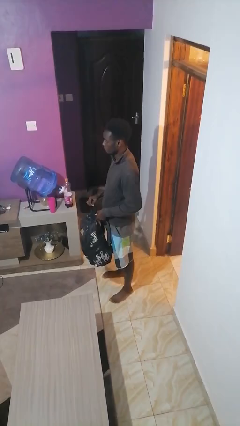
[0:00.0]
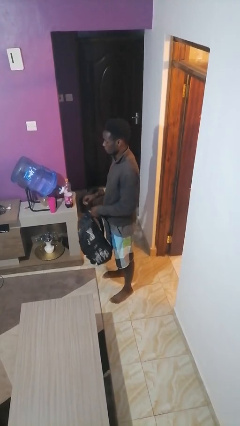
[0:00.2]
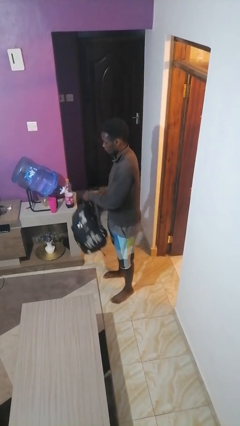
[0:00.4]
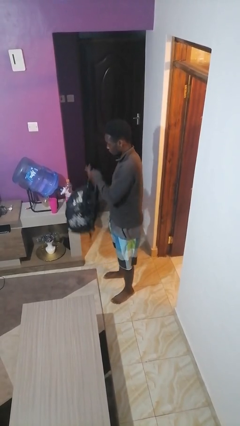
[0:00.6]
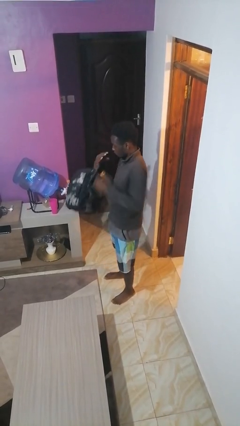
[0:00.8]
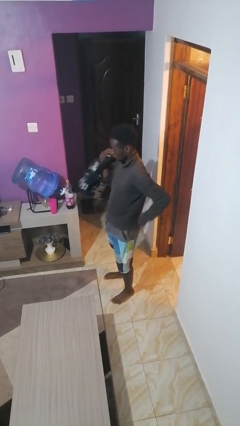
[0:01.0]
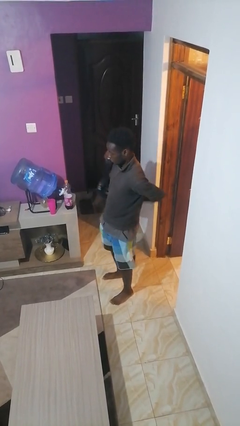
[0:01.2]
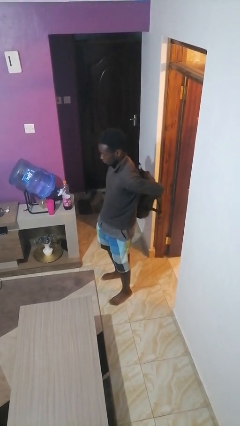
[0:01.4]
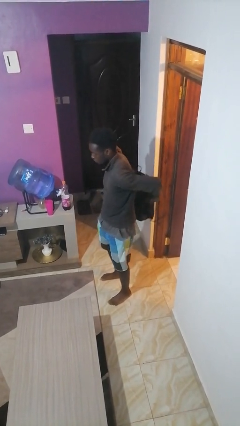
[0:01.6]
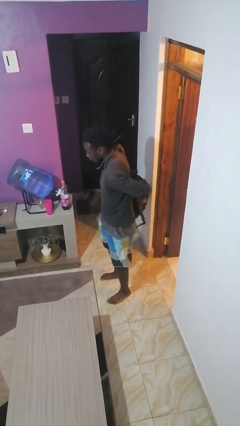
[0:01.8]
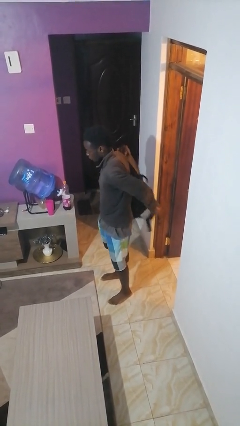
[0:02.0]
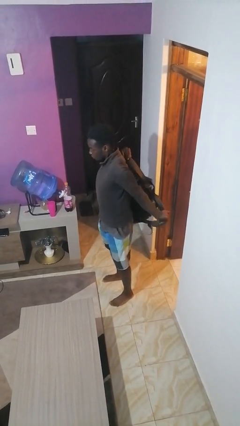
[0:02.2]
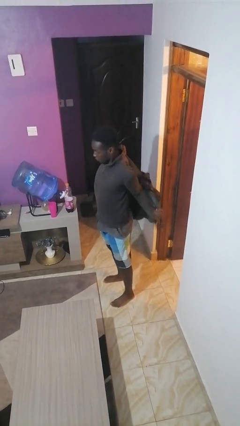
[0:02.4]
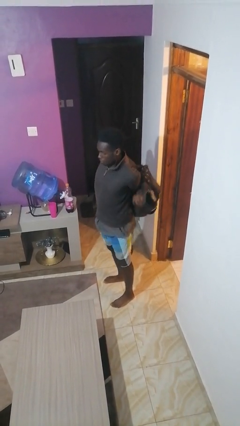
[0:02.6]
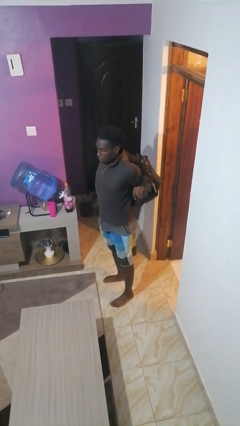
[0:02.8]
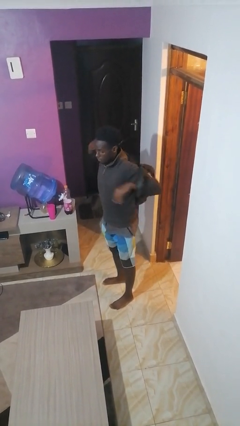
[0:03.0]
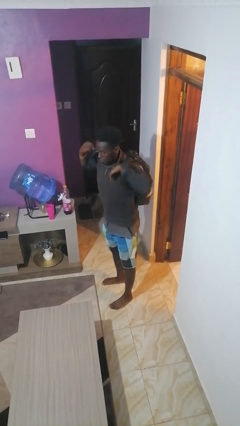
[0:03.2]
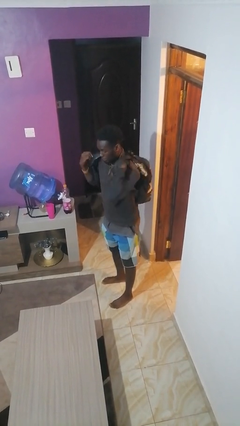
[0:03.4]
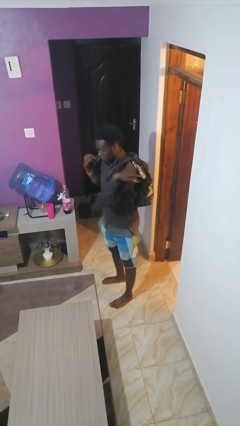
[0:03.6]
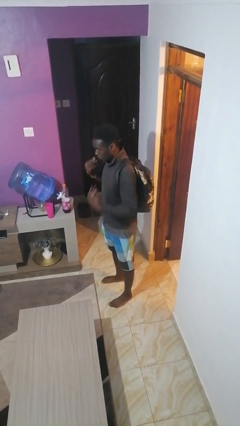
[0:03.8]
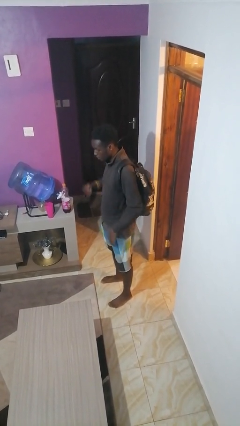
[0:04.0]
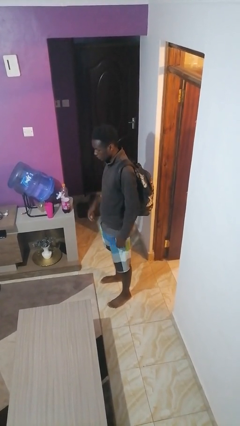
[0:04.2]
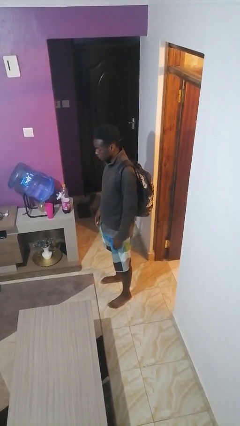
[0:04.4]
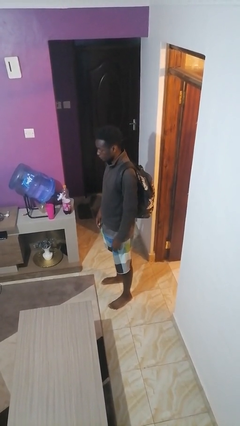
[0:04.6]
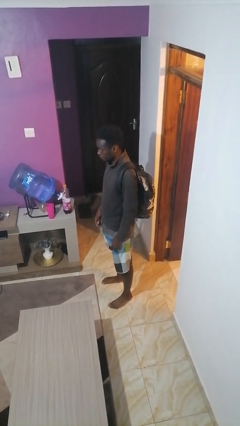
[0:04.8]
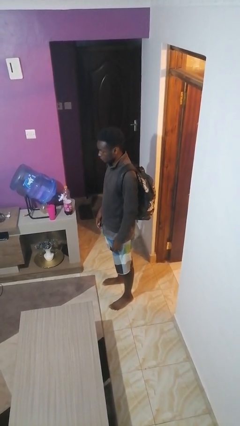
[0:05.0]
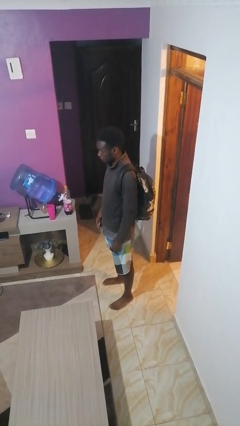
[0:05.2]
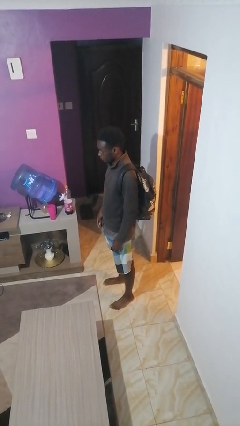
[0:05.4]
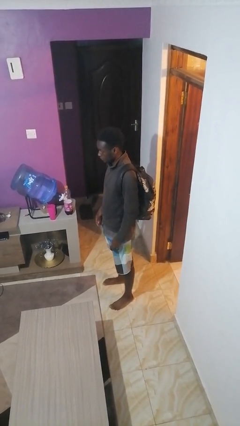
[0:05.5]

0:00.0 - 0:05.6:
person puts on backpack

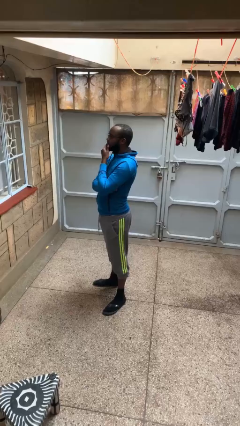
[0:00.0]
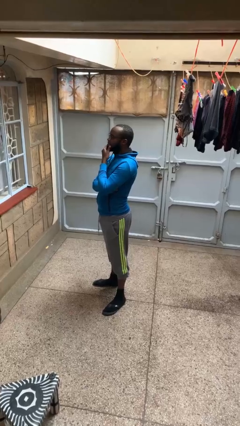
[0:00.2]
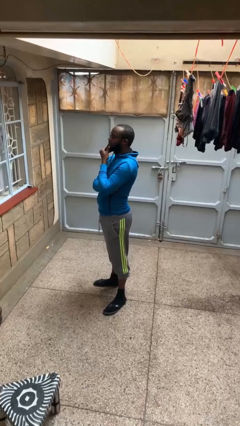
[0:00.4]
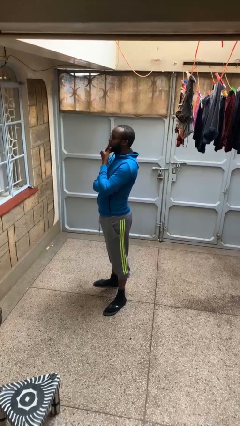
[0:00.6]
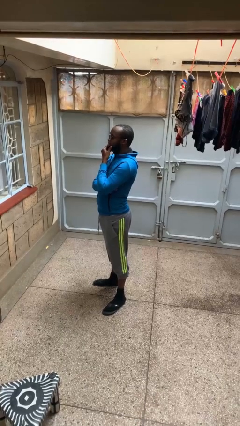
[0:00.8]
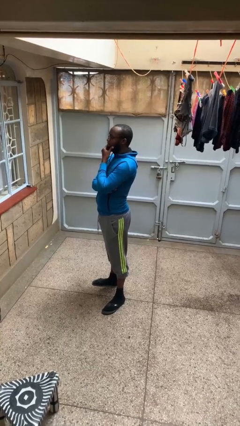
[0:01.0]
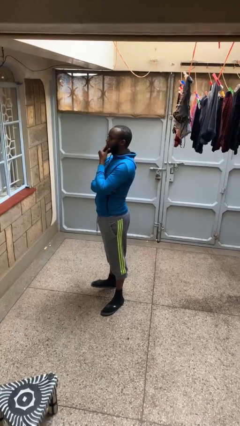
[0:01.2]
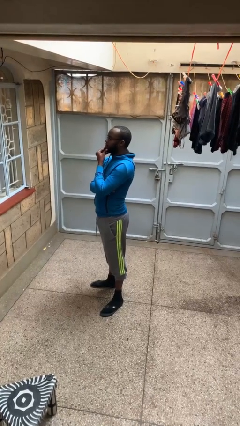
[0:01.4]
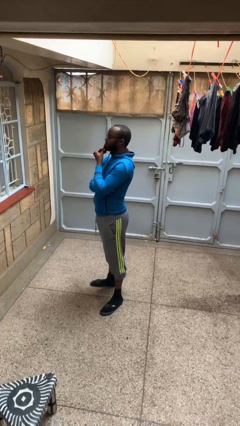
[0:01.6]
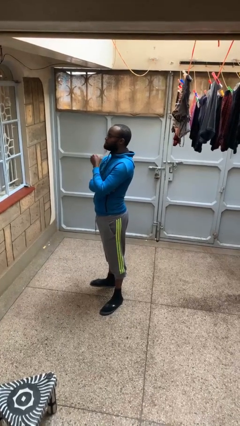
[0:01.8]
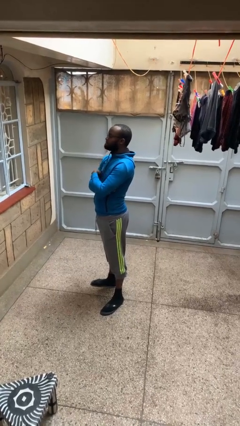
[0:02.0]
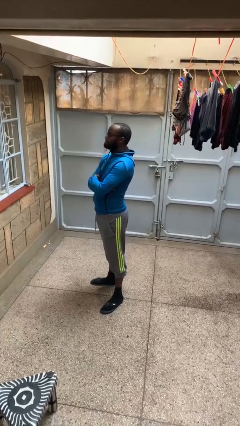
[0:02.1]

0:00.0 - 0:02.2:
person strokes chin

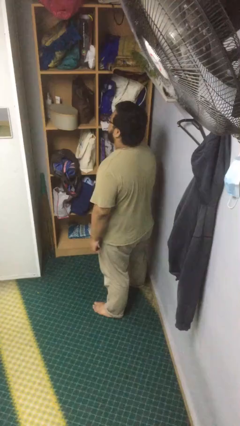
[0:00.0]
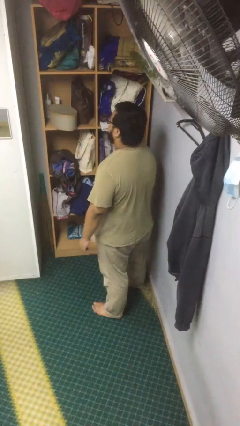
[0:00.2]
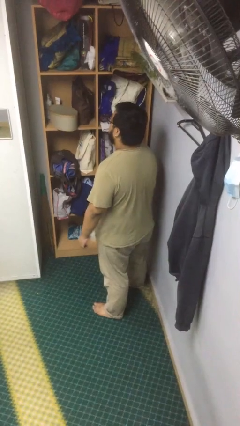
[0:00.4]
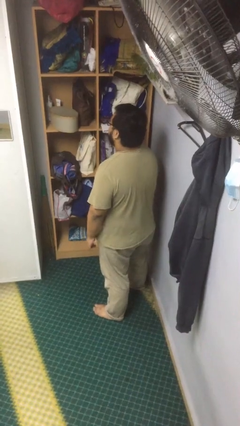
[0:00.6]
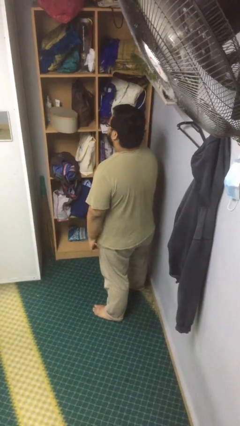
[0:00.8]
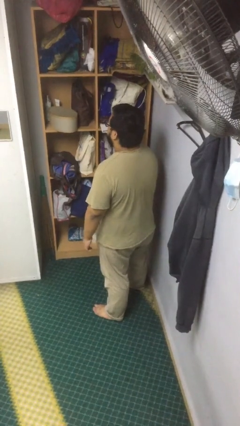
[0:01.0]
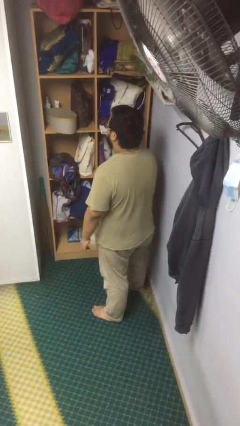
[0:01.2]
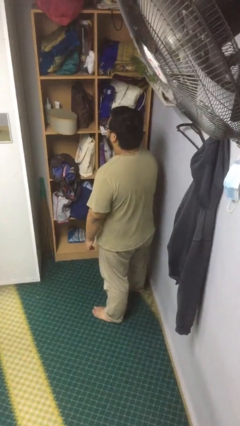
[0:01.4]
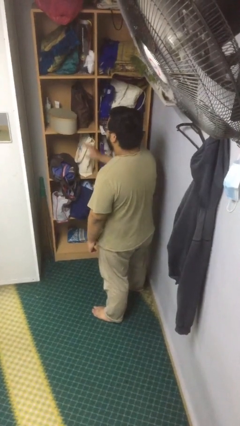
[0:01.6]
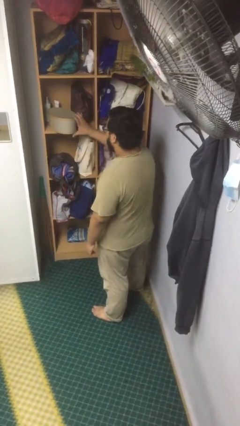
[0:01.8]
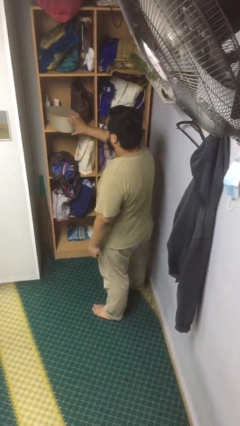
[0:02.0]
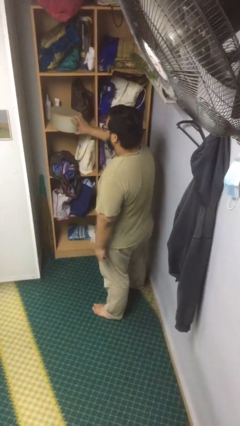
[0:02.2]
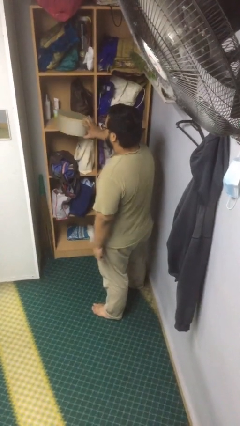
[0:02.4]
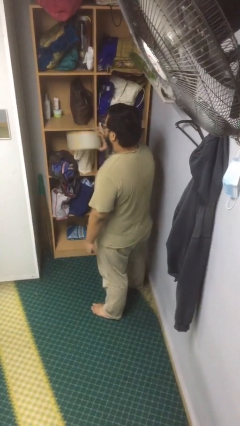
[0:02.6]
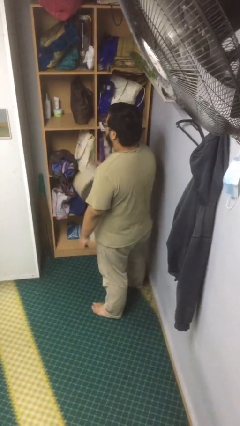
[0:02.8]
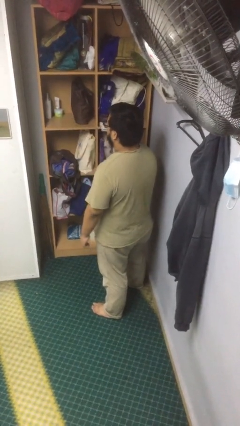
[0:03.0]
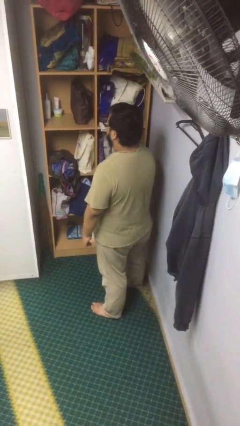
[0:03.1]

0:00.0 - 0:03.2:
person picks up object from cabinet

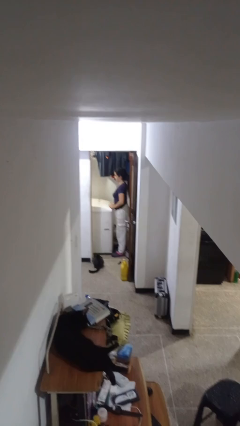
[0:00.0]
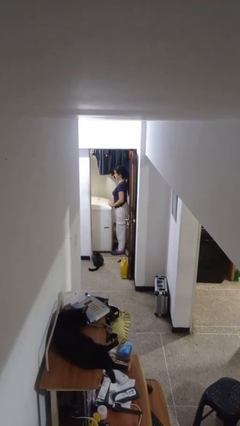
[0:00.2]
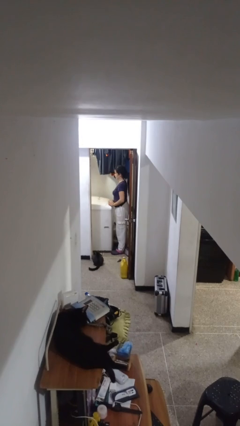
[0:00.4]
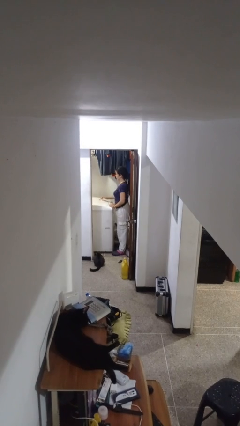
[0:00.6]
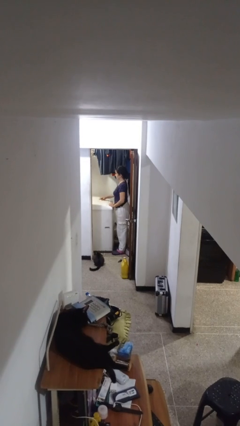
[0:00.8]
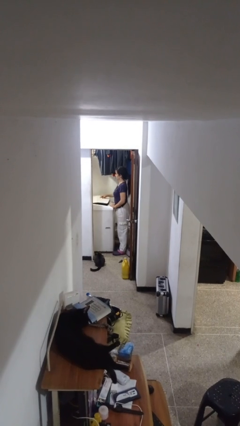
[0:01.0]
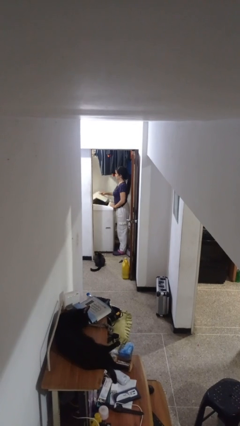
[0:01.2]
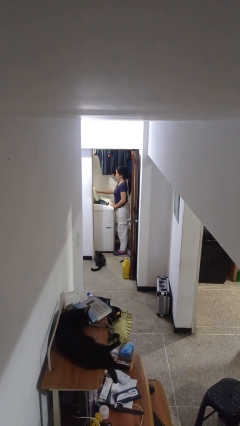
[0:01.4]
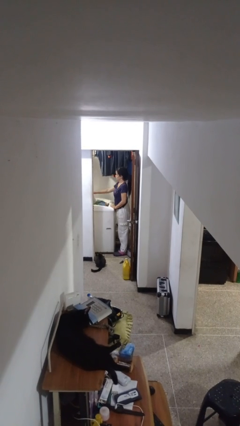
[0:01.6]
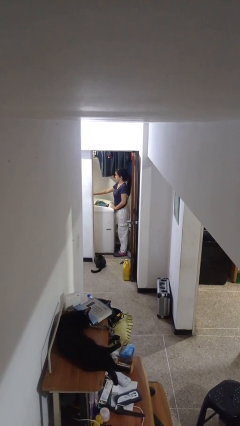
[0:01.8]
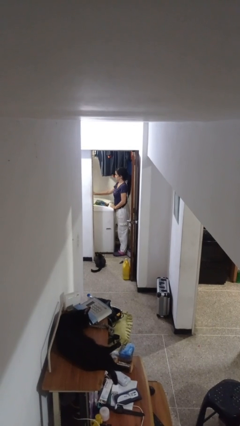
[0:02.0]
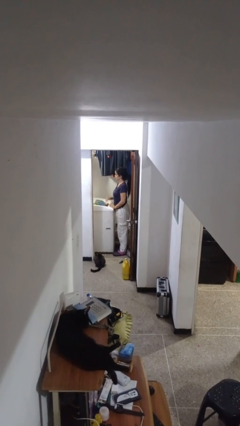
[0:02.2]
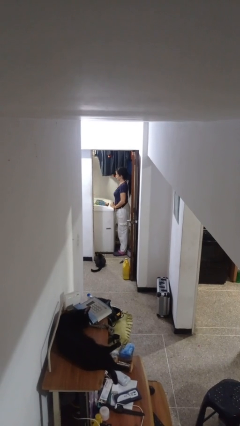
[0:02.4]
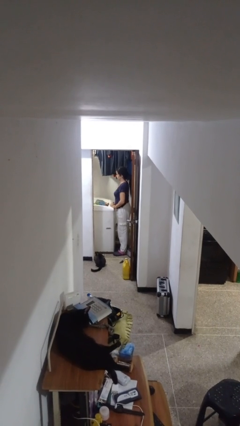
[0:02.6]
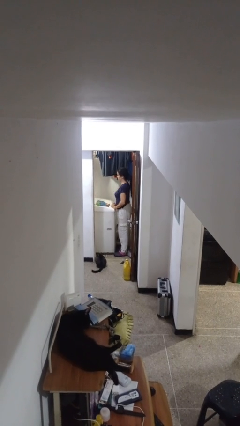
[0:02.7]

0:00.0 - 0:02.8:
person opens clothes washer

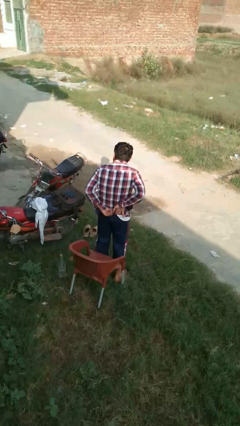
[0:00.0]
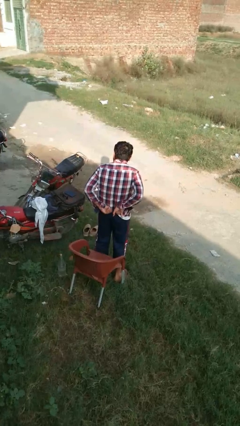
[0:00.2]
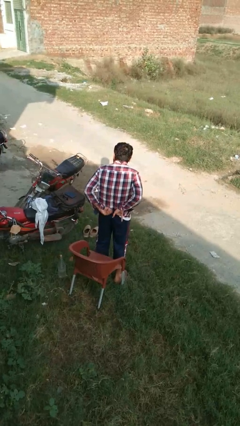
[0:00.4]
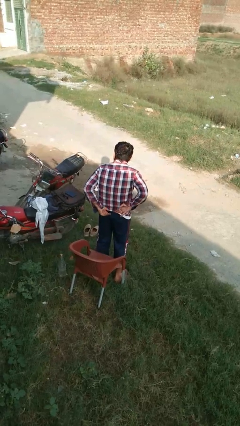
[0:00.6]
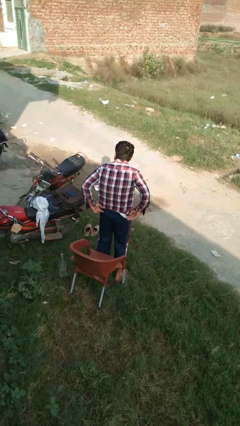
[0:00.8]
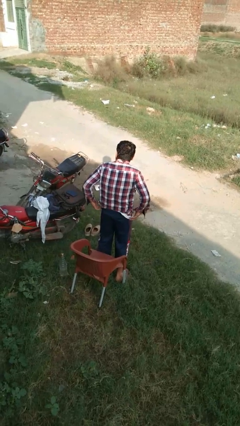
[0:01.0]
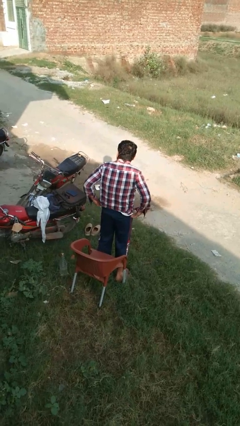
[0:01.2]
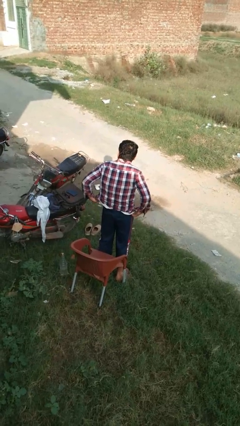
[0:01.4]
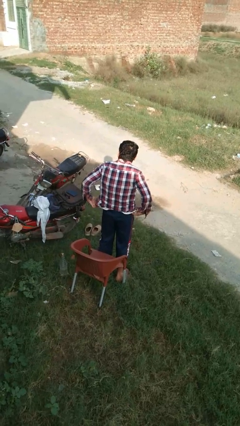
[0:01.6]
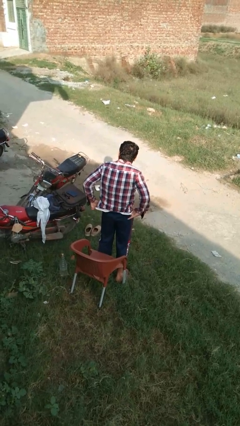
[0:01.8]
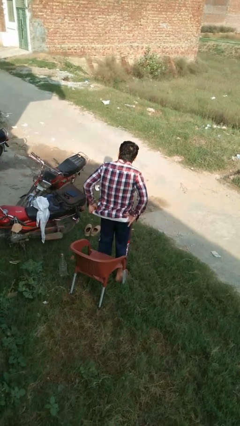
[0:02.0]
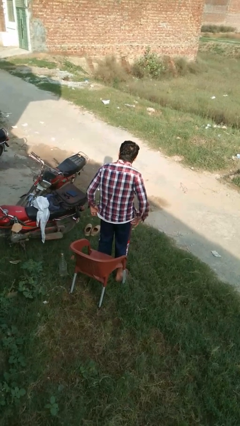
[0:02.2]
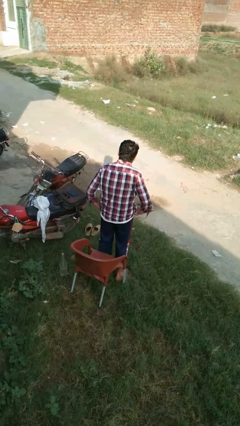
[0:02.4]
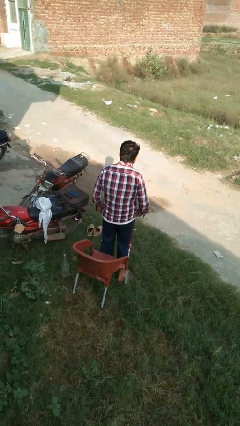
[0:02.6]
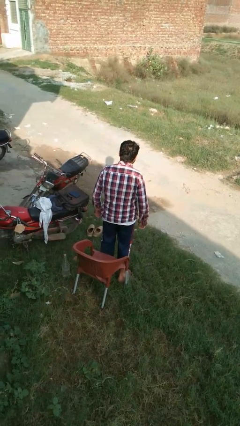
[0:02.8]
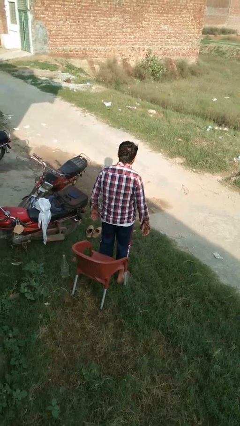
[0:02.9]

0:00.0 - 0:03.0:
person untucks shirt

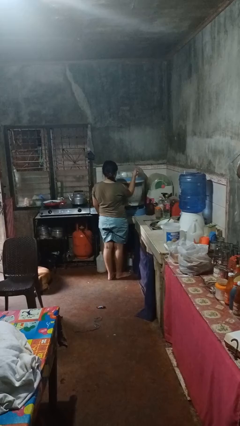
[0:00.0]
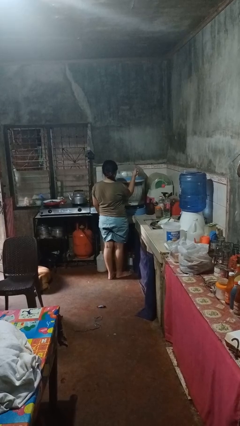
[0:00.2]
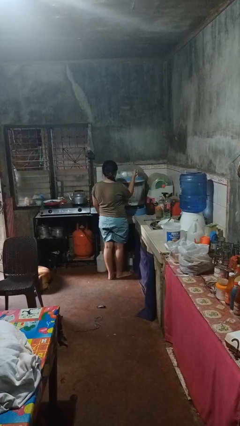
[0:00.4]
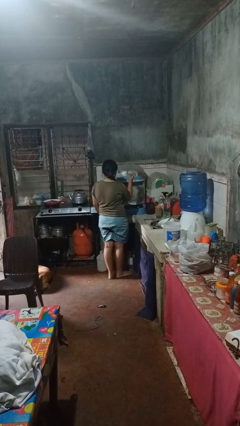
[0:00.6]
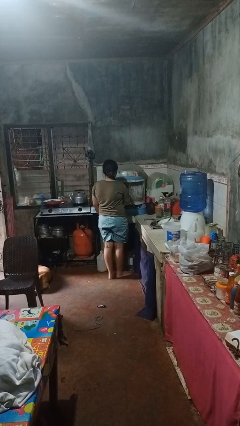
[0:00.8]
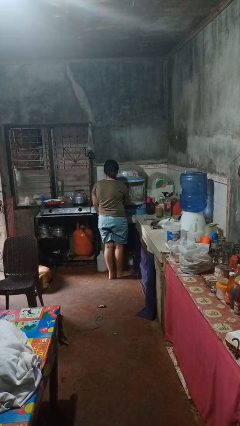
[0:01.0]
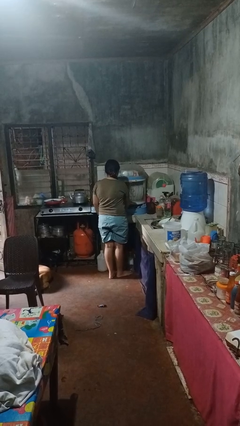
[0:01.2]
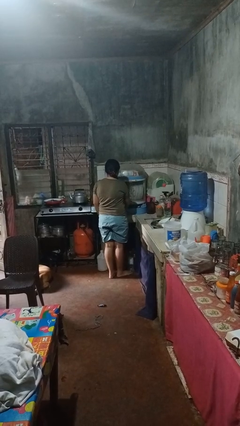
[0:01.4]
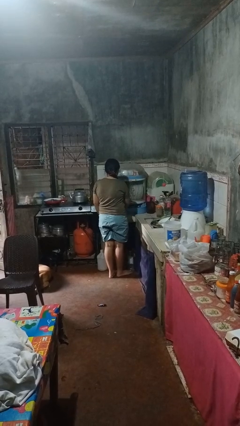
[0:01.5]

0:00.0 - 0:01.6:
person puts object into kitchen drawer
